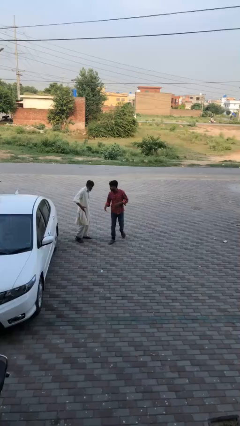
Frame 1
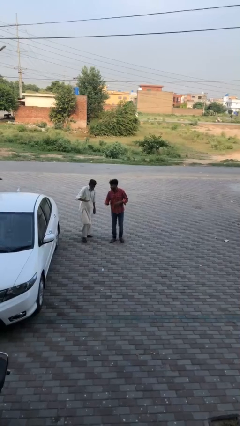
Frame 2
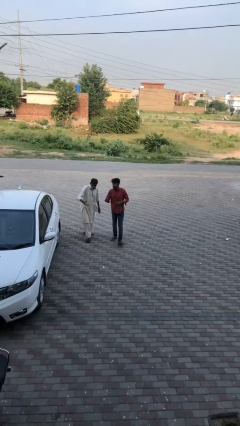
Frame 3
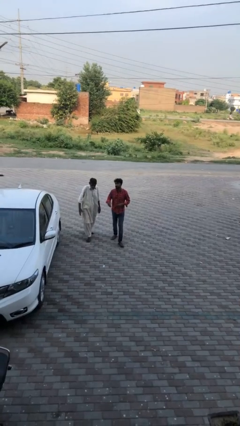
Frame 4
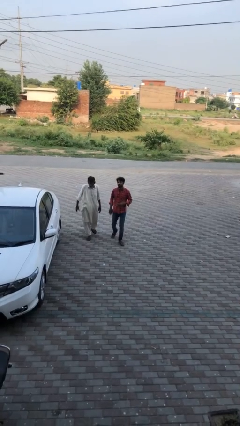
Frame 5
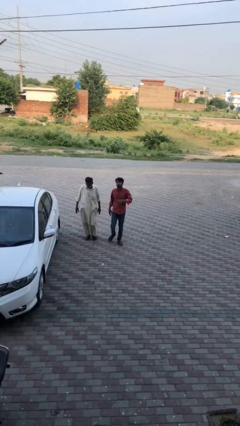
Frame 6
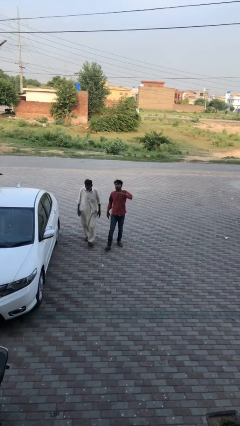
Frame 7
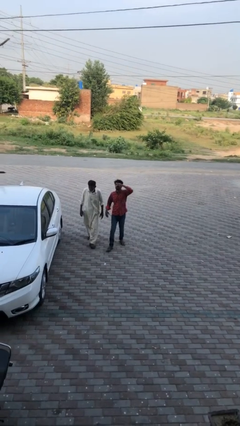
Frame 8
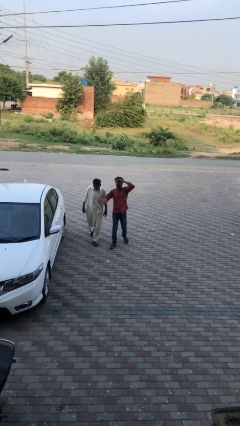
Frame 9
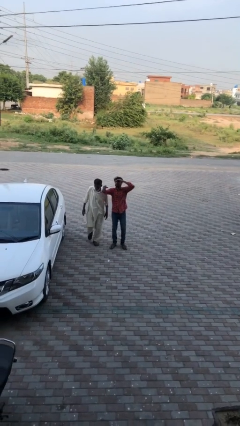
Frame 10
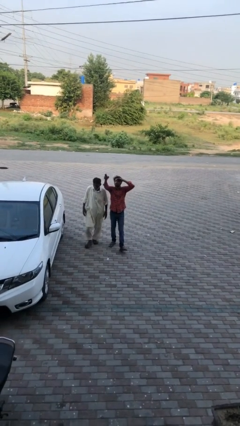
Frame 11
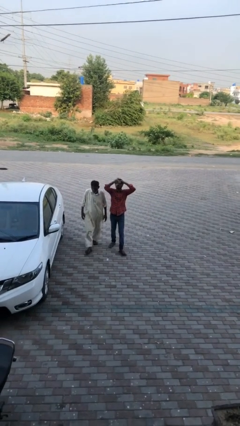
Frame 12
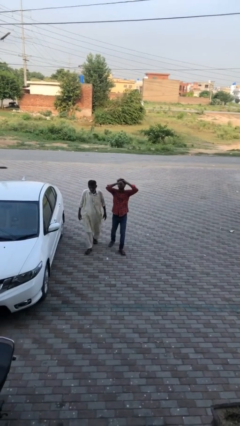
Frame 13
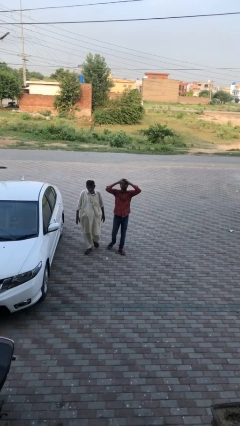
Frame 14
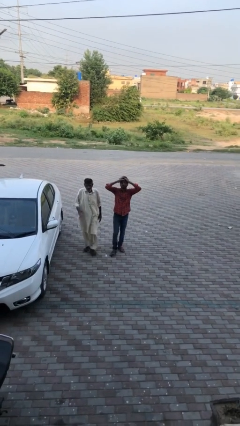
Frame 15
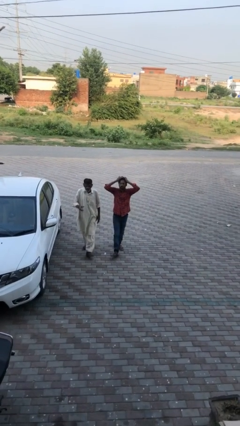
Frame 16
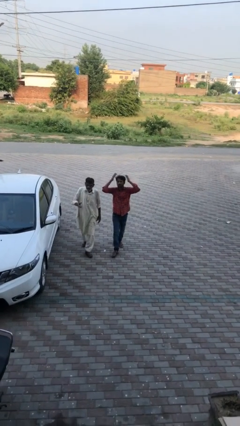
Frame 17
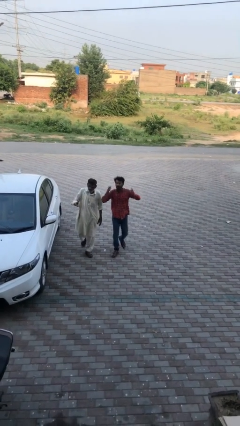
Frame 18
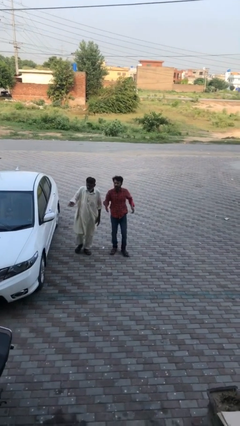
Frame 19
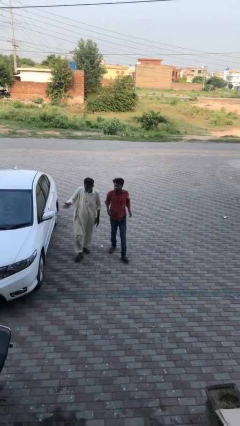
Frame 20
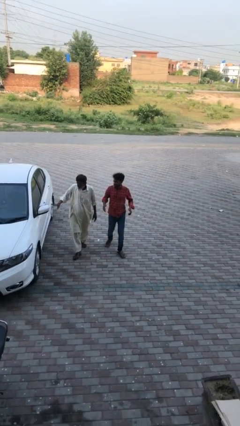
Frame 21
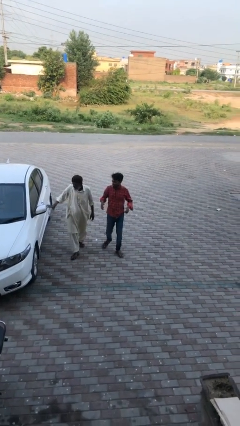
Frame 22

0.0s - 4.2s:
person talks to person

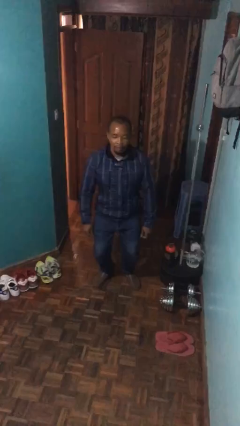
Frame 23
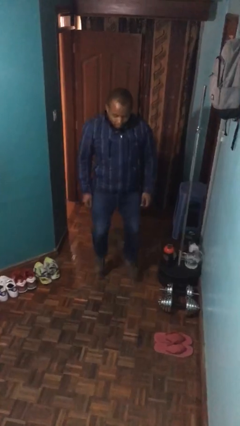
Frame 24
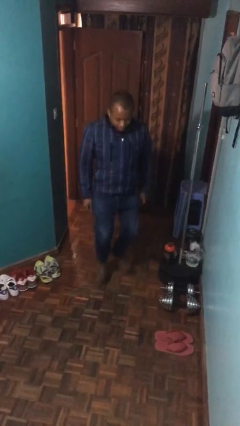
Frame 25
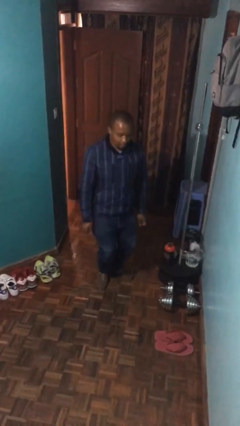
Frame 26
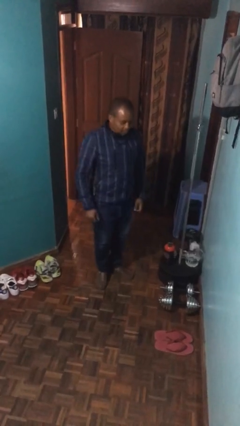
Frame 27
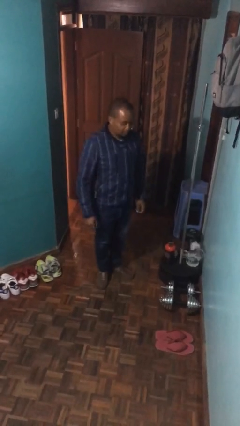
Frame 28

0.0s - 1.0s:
person jumps

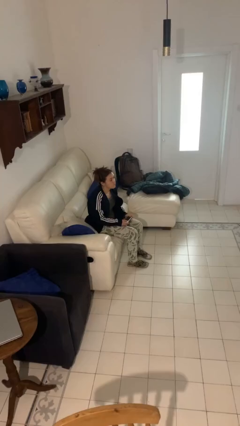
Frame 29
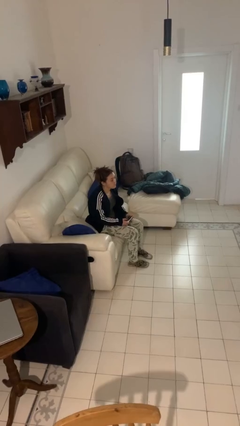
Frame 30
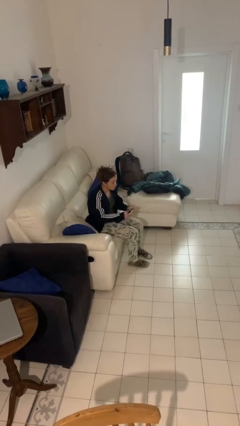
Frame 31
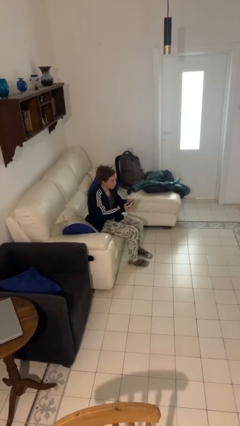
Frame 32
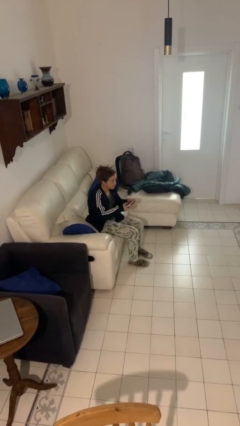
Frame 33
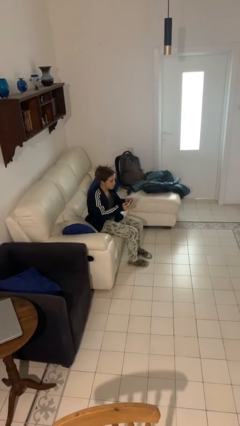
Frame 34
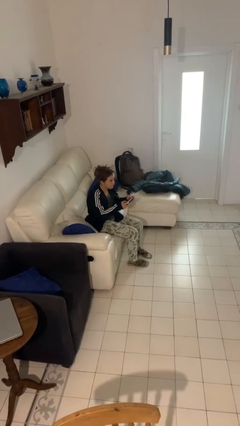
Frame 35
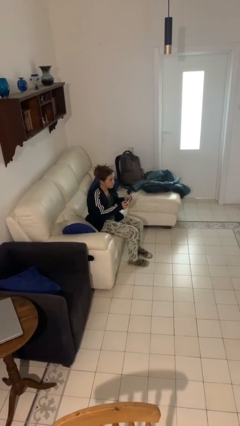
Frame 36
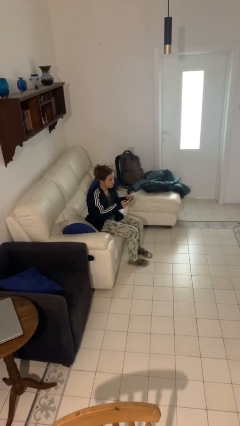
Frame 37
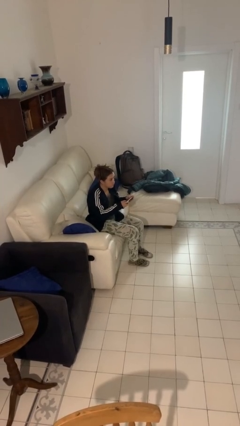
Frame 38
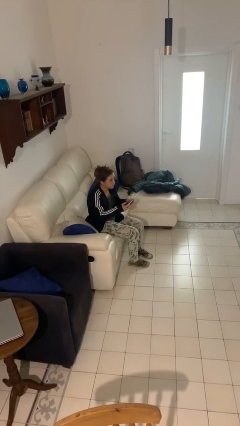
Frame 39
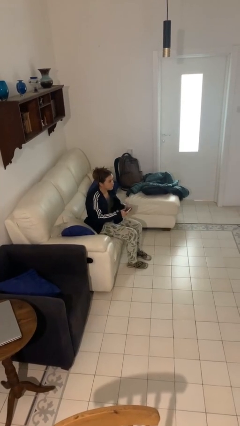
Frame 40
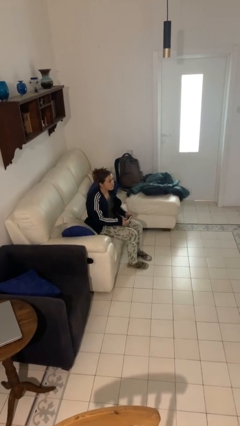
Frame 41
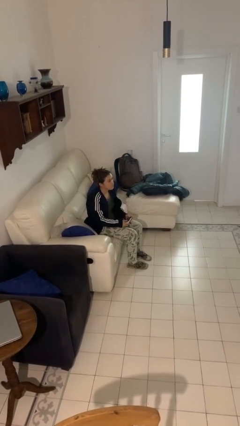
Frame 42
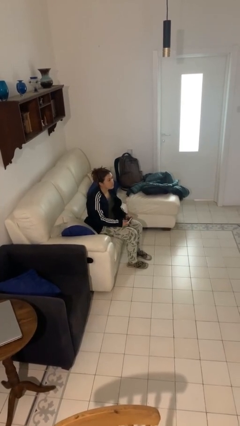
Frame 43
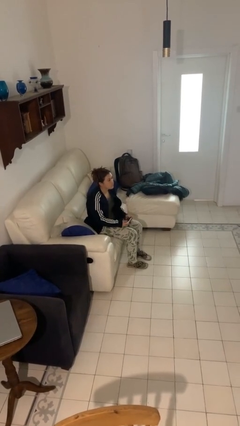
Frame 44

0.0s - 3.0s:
person interacts with handheld game

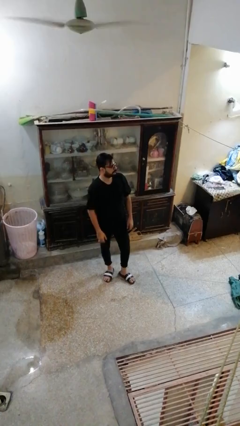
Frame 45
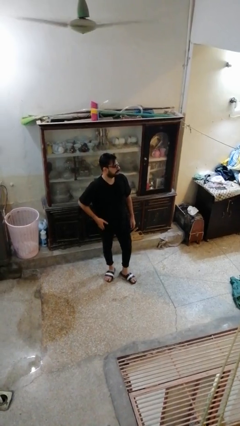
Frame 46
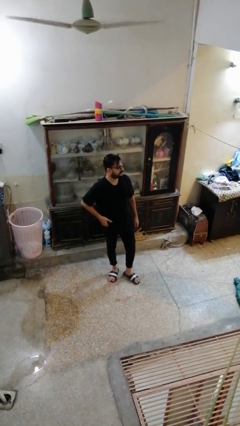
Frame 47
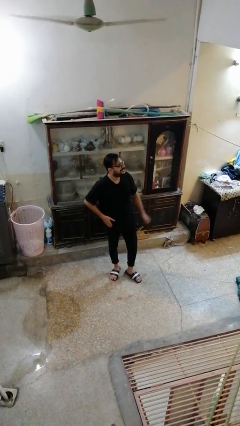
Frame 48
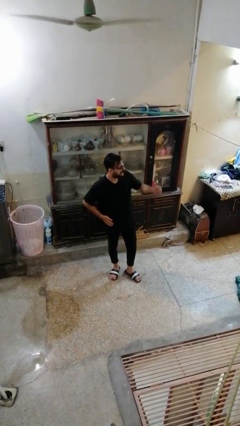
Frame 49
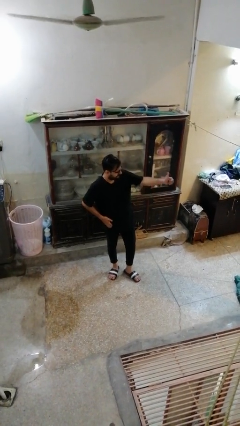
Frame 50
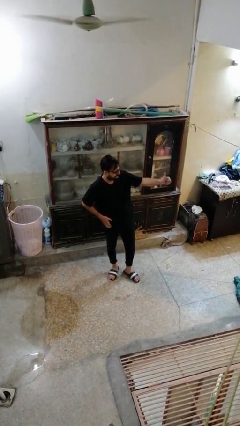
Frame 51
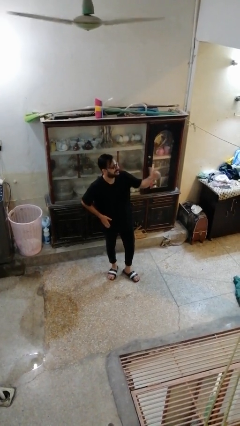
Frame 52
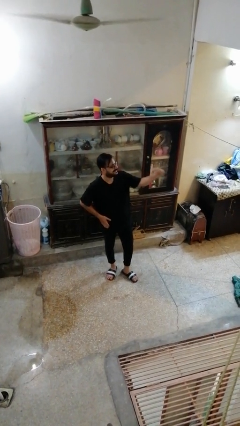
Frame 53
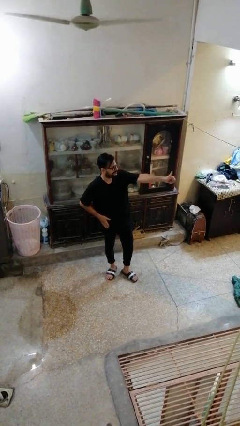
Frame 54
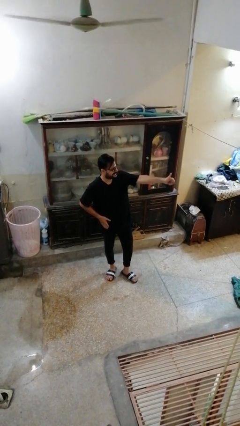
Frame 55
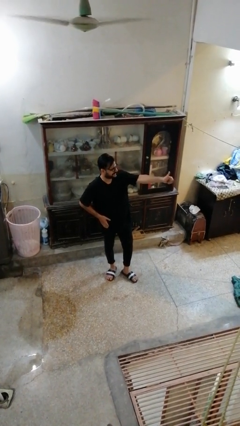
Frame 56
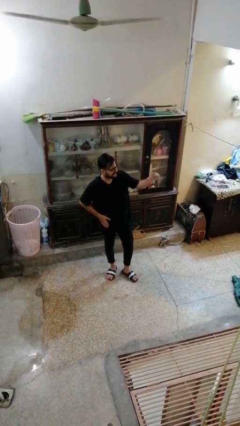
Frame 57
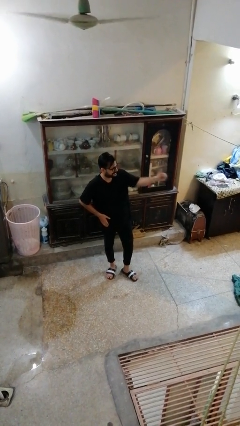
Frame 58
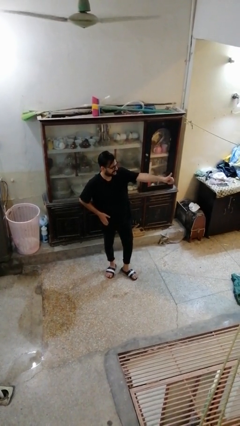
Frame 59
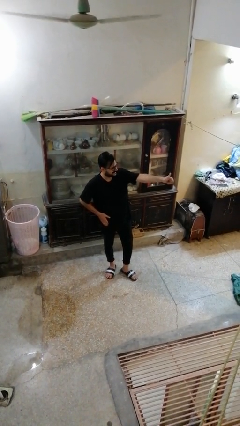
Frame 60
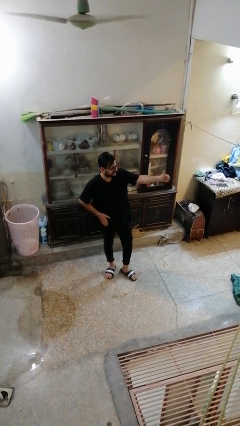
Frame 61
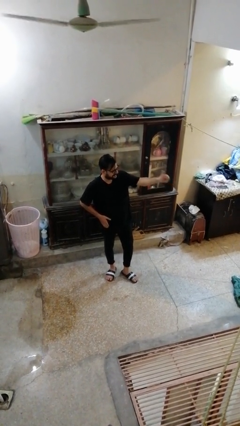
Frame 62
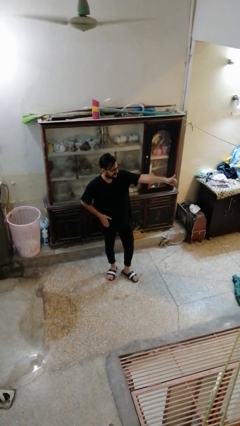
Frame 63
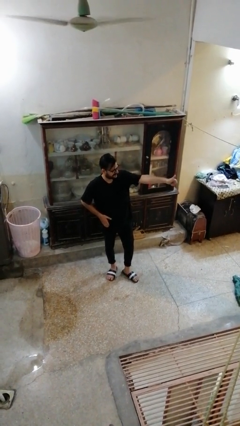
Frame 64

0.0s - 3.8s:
person gestures thumbs up

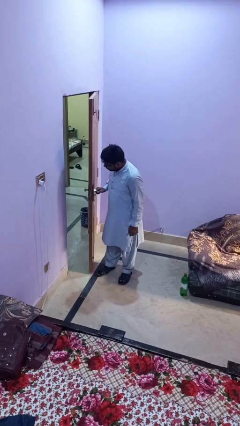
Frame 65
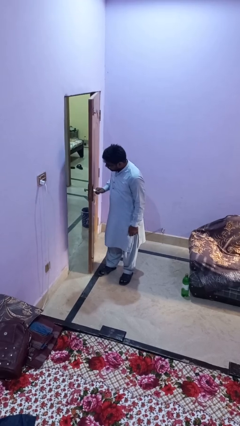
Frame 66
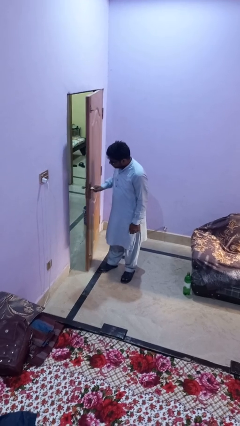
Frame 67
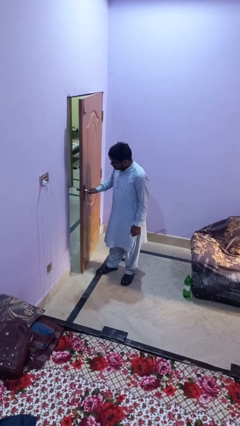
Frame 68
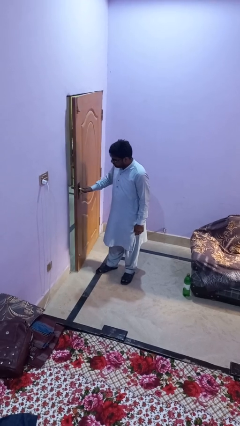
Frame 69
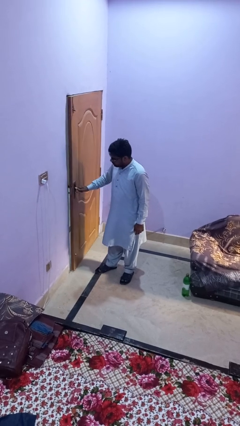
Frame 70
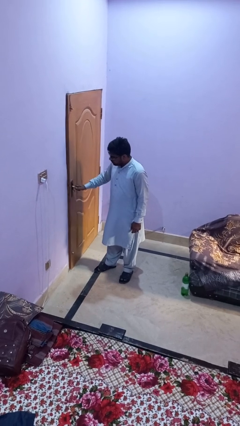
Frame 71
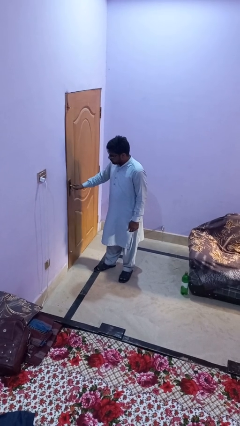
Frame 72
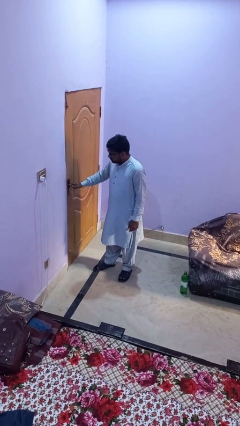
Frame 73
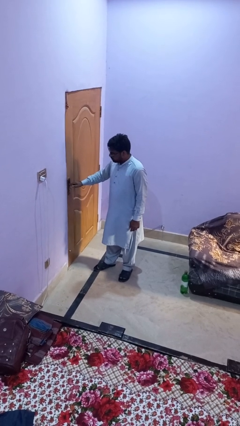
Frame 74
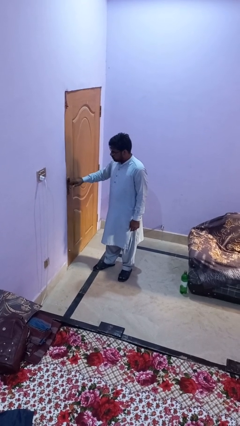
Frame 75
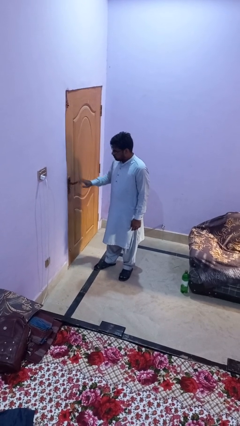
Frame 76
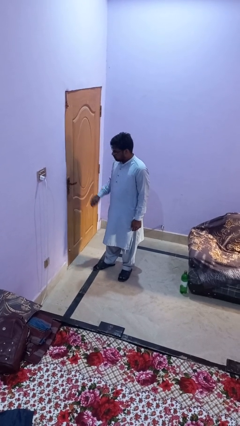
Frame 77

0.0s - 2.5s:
person closes facility door

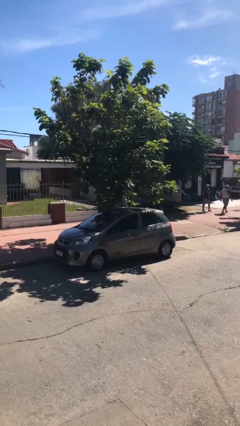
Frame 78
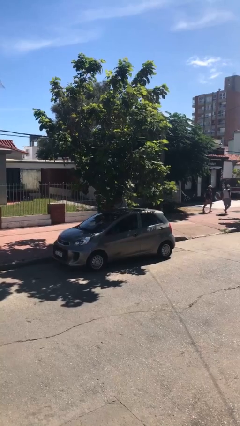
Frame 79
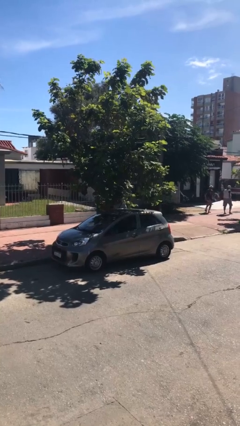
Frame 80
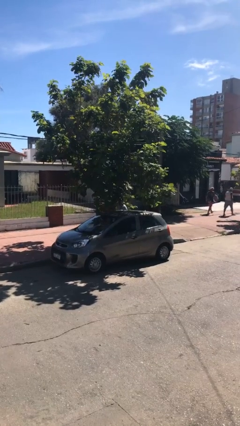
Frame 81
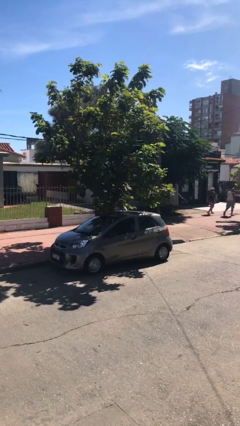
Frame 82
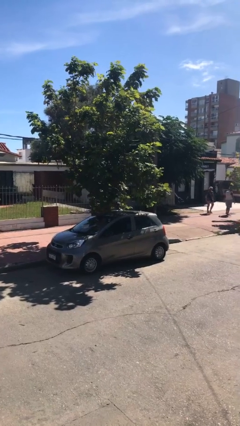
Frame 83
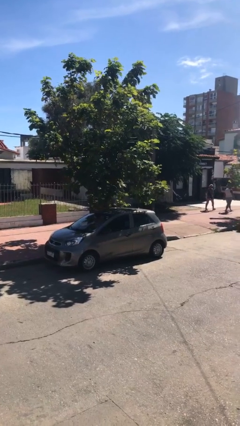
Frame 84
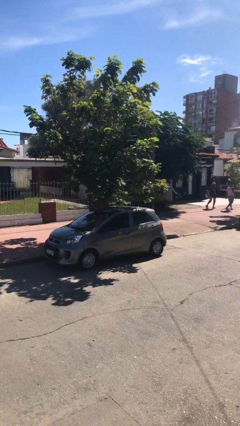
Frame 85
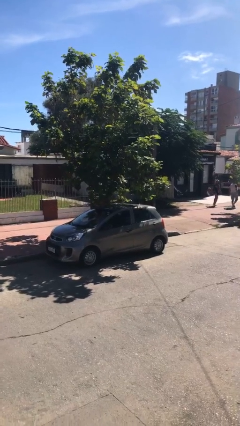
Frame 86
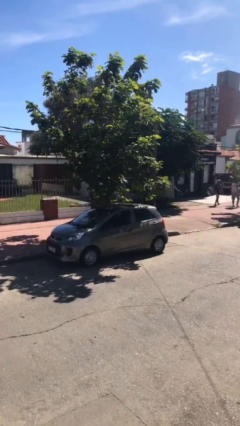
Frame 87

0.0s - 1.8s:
person enters car

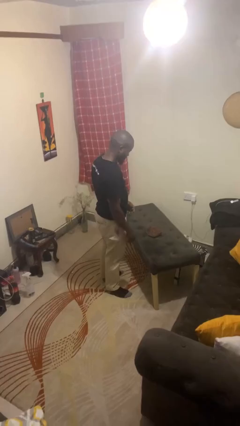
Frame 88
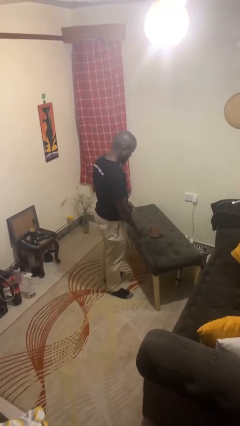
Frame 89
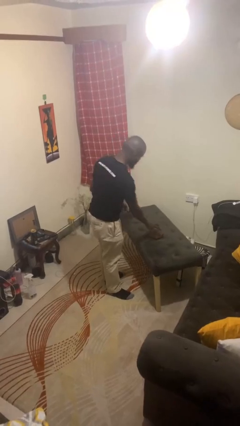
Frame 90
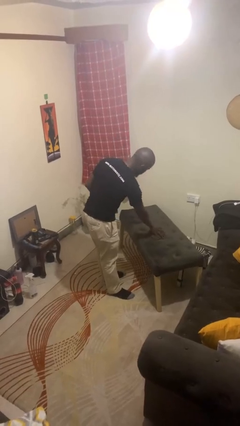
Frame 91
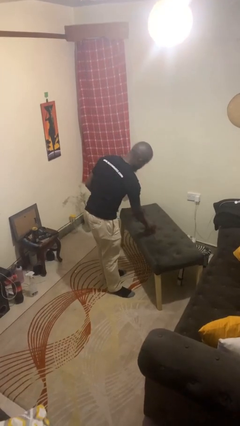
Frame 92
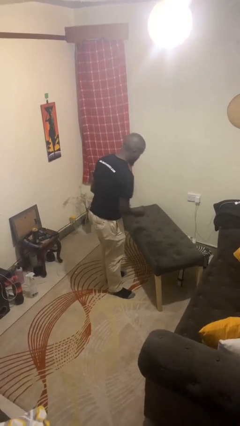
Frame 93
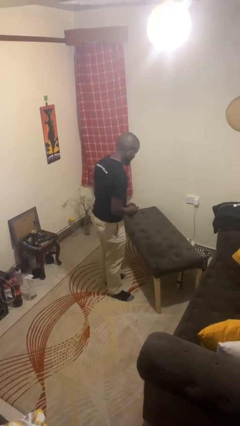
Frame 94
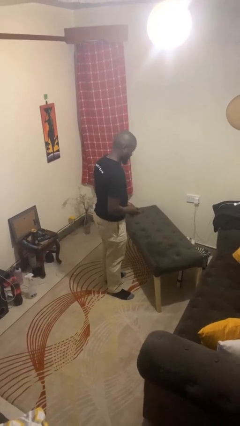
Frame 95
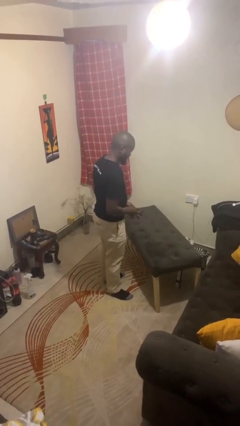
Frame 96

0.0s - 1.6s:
person picks up object from table
